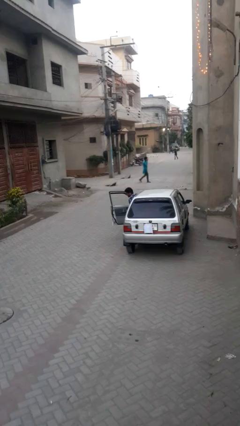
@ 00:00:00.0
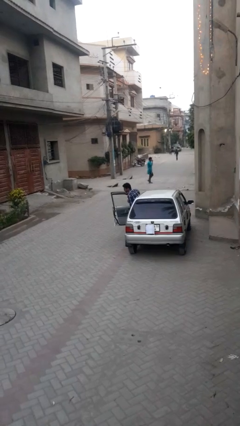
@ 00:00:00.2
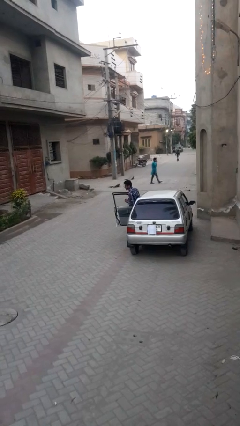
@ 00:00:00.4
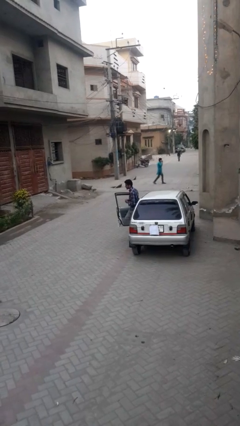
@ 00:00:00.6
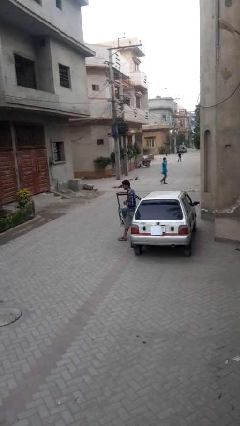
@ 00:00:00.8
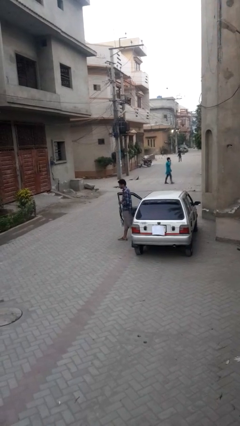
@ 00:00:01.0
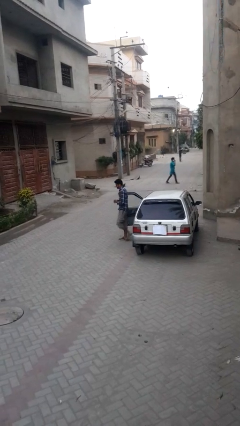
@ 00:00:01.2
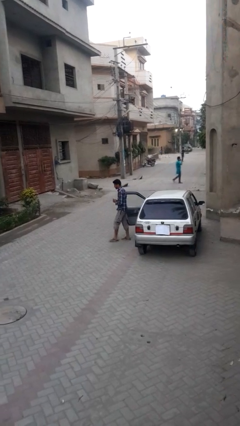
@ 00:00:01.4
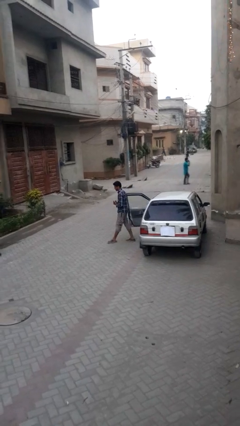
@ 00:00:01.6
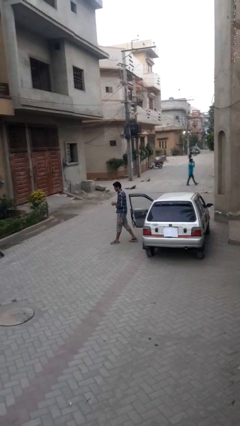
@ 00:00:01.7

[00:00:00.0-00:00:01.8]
person exits car

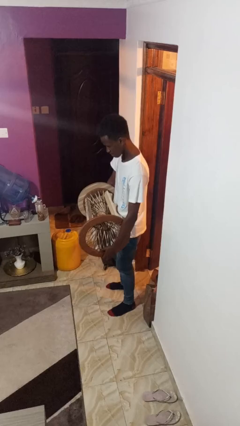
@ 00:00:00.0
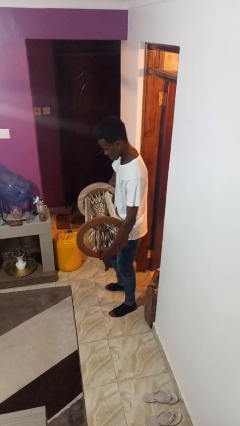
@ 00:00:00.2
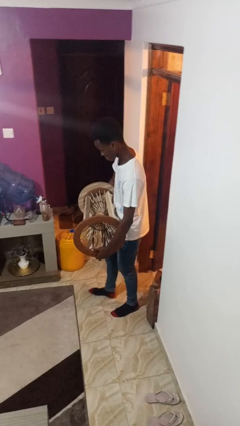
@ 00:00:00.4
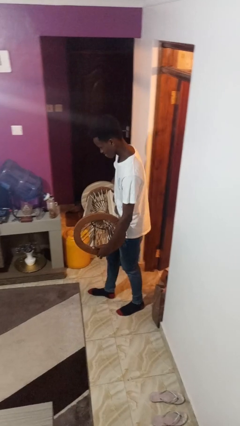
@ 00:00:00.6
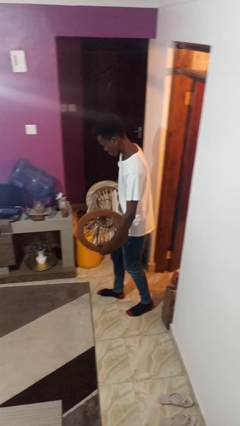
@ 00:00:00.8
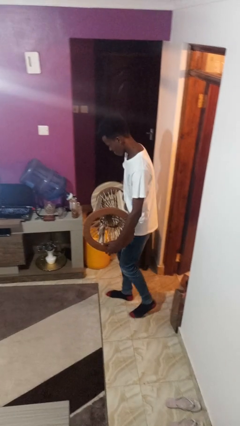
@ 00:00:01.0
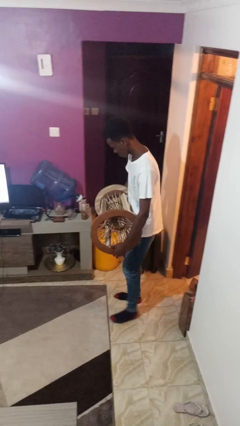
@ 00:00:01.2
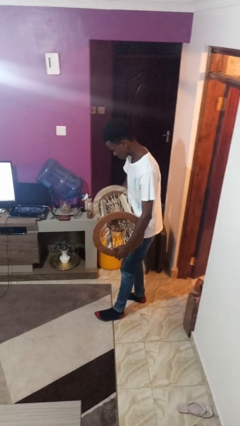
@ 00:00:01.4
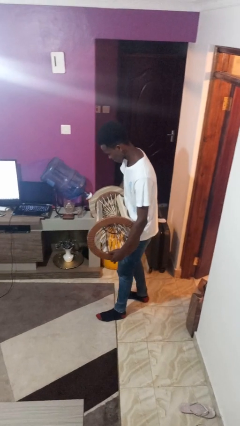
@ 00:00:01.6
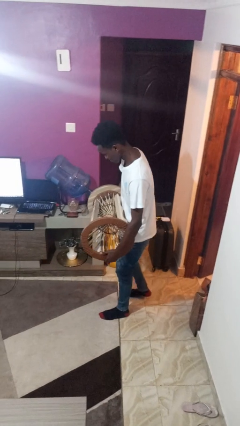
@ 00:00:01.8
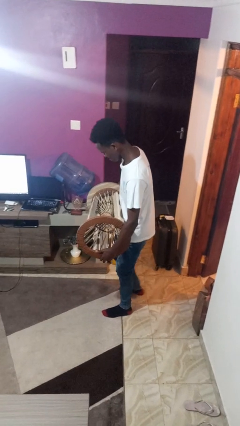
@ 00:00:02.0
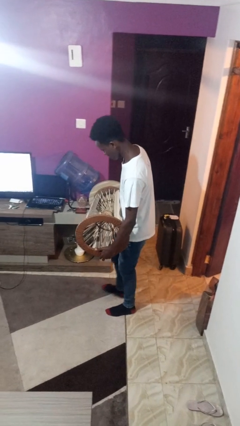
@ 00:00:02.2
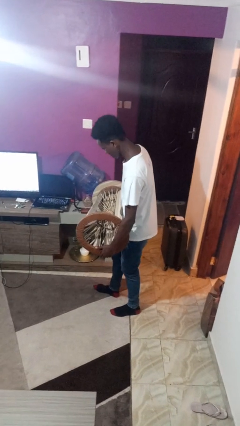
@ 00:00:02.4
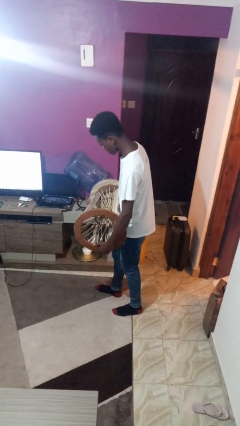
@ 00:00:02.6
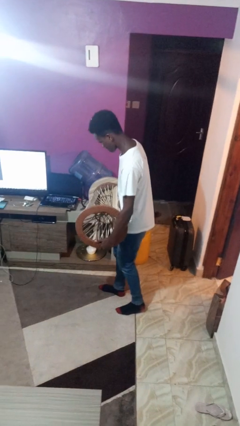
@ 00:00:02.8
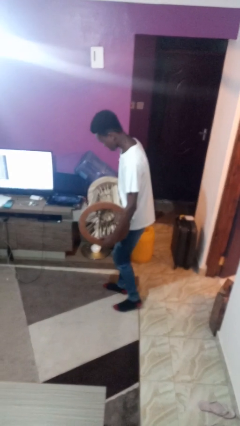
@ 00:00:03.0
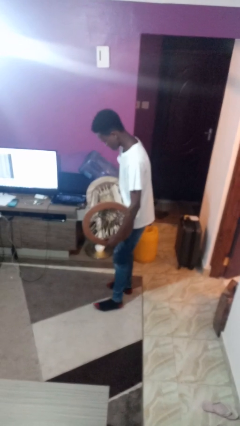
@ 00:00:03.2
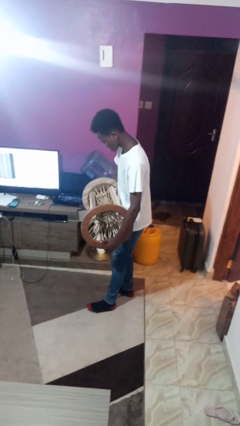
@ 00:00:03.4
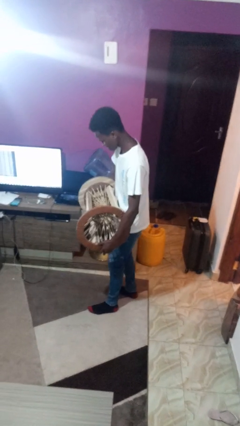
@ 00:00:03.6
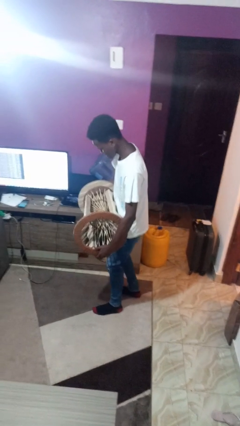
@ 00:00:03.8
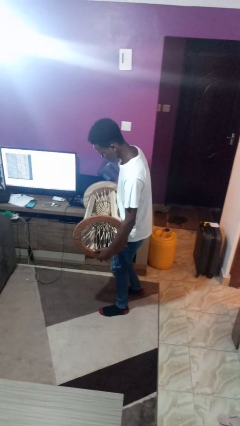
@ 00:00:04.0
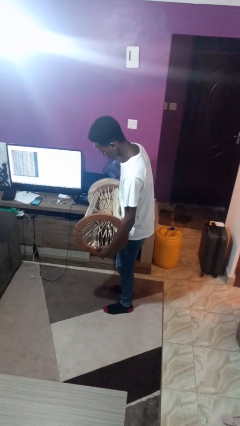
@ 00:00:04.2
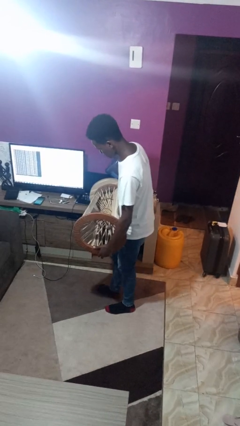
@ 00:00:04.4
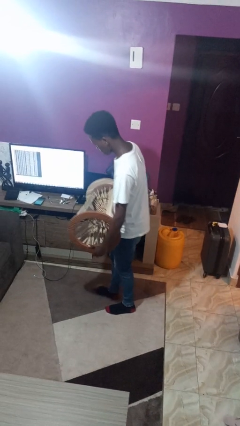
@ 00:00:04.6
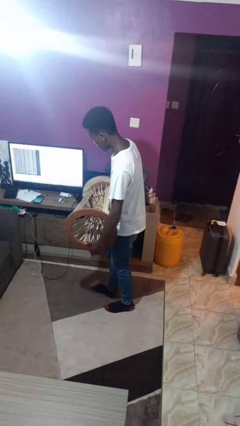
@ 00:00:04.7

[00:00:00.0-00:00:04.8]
person carries furniture

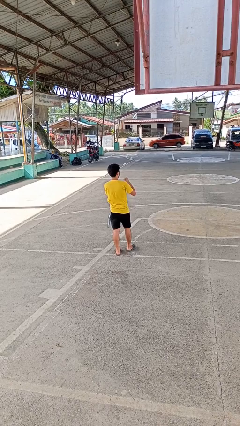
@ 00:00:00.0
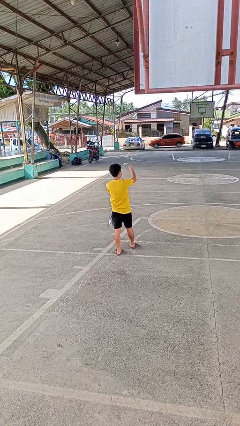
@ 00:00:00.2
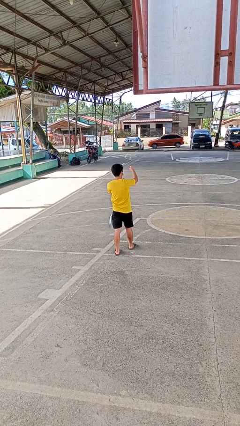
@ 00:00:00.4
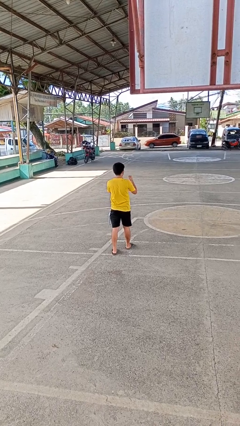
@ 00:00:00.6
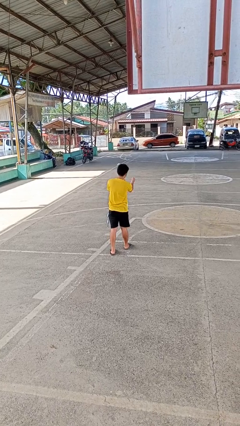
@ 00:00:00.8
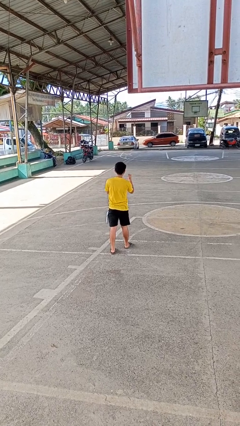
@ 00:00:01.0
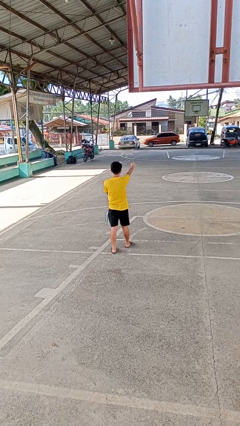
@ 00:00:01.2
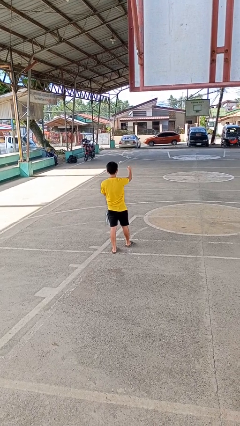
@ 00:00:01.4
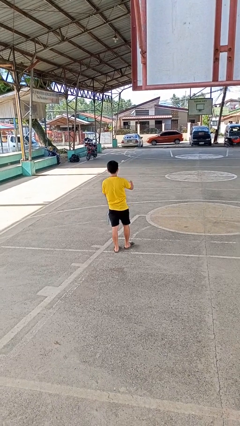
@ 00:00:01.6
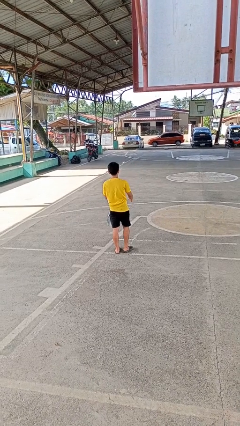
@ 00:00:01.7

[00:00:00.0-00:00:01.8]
person punches

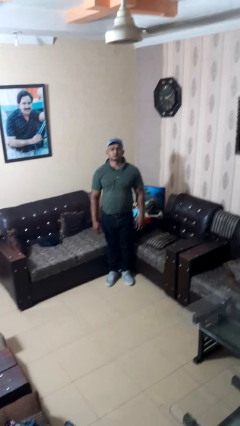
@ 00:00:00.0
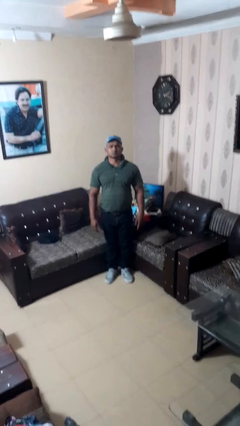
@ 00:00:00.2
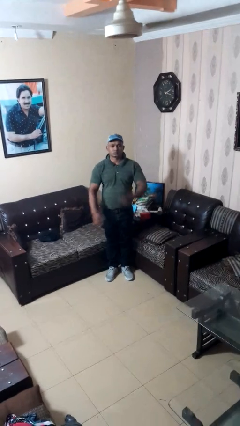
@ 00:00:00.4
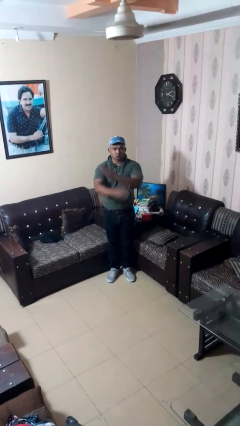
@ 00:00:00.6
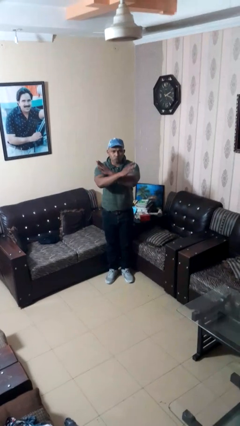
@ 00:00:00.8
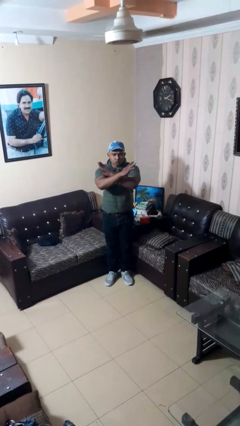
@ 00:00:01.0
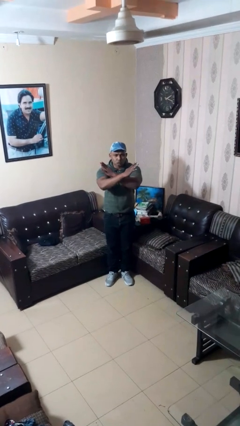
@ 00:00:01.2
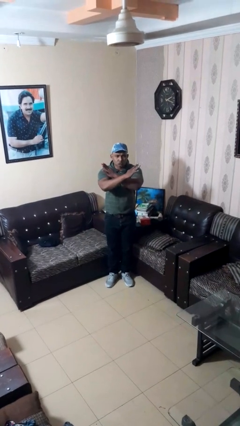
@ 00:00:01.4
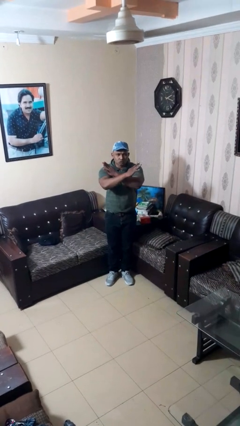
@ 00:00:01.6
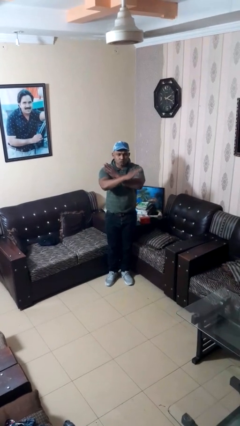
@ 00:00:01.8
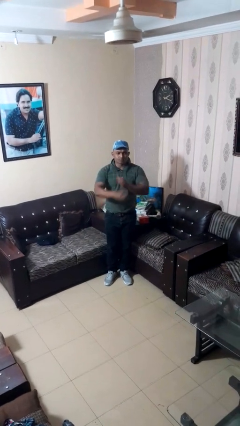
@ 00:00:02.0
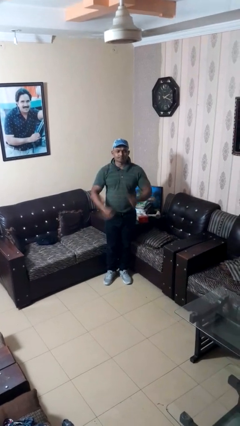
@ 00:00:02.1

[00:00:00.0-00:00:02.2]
person gestures arms x

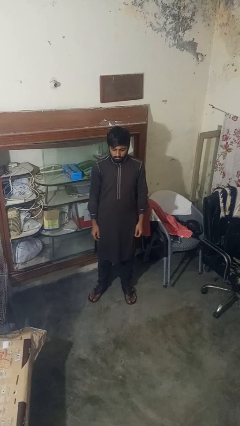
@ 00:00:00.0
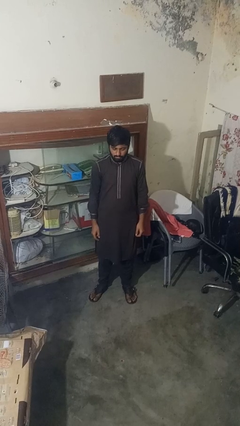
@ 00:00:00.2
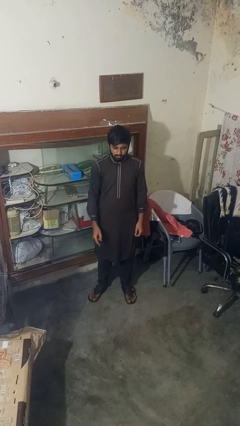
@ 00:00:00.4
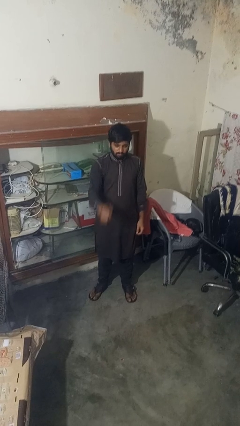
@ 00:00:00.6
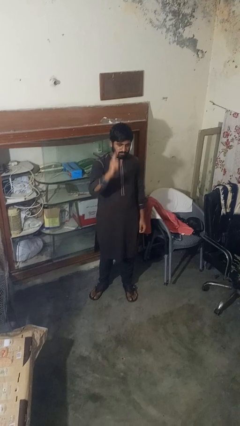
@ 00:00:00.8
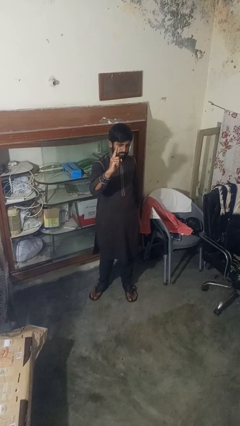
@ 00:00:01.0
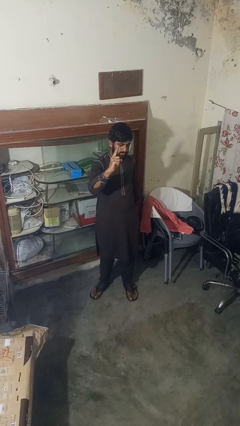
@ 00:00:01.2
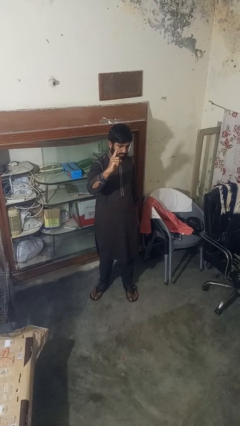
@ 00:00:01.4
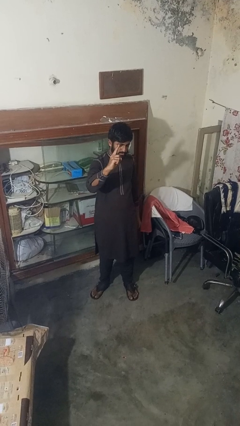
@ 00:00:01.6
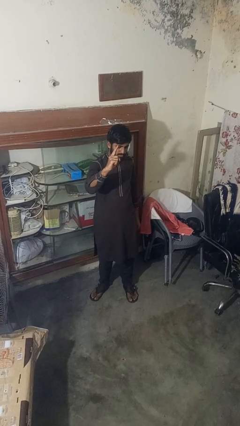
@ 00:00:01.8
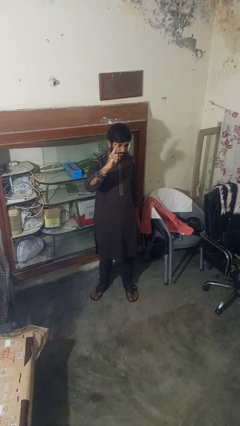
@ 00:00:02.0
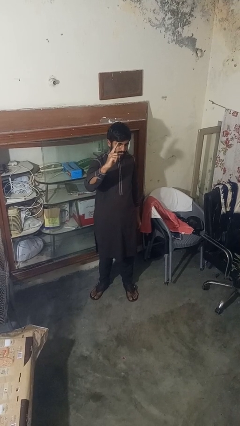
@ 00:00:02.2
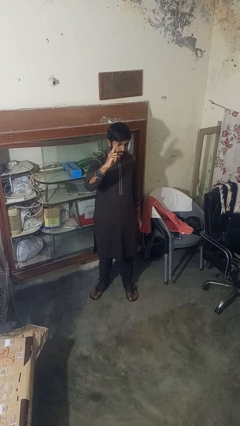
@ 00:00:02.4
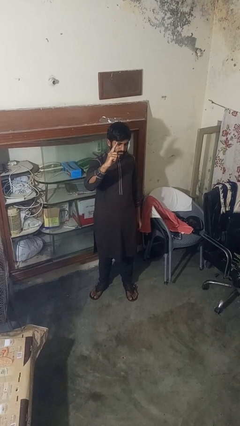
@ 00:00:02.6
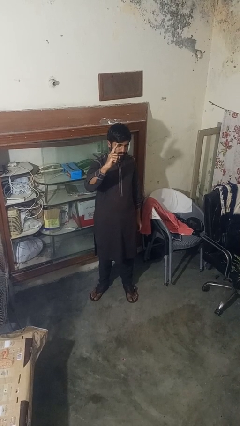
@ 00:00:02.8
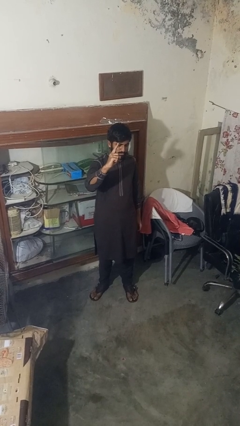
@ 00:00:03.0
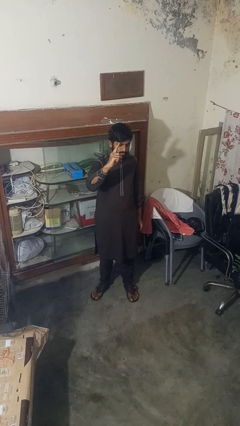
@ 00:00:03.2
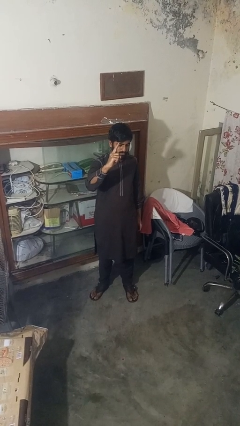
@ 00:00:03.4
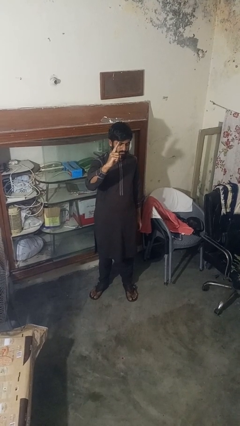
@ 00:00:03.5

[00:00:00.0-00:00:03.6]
person gestures number one

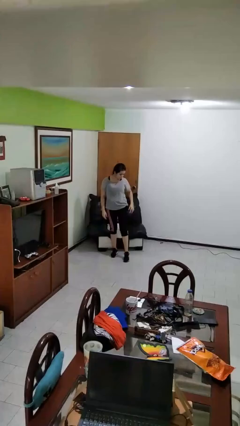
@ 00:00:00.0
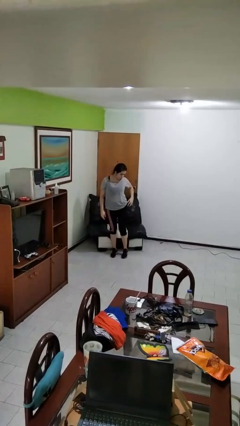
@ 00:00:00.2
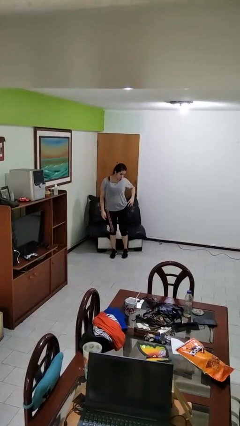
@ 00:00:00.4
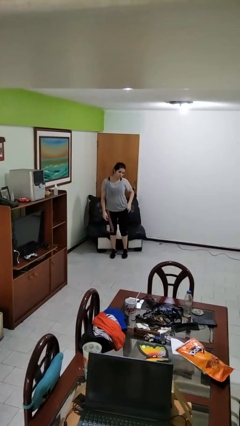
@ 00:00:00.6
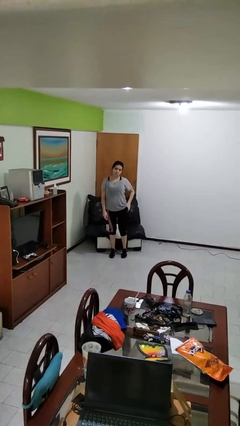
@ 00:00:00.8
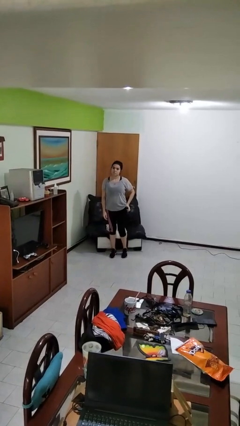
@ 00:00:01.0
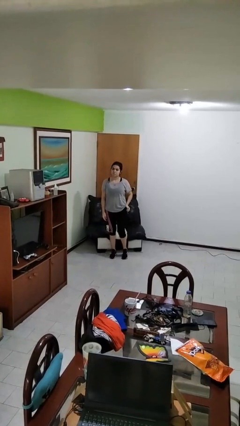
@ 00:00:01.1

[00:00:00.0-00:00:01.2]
person puts phone into pocket

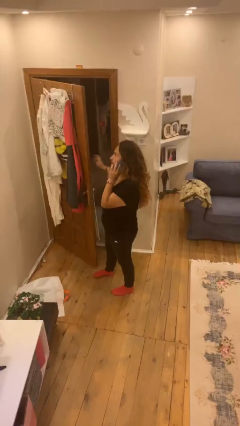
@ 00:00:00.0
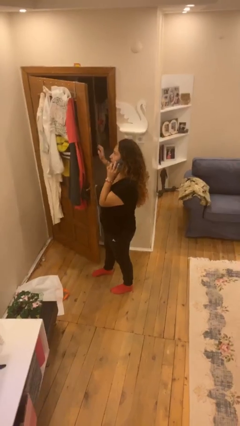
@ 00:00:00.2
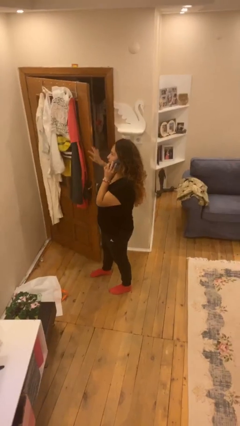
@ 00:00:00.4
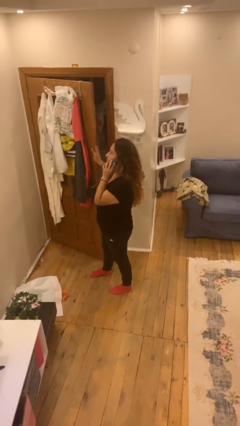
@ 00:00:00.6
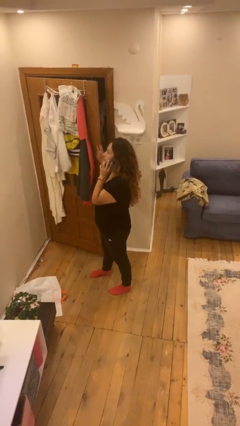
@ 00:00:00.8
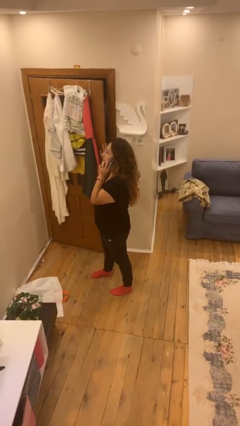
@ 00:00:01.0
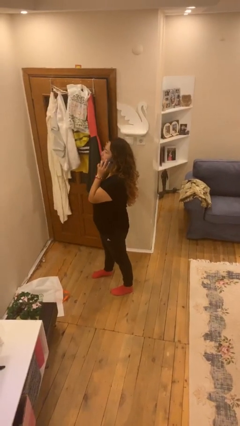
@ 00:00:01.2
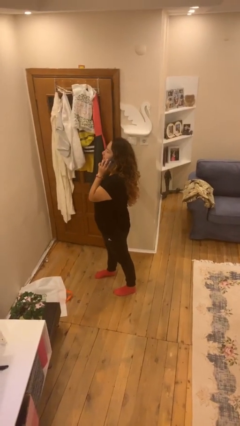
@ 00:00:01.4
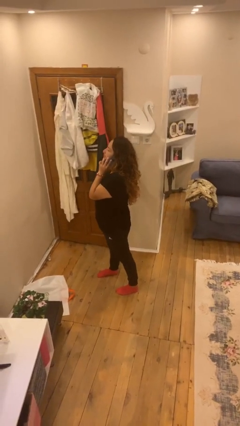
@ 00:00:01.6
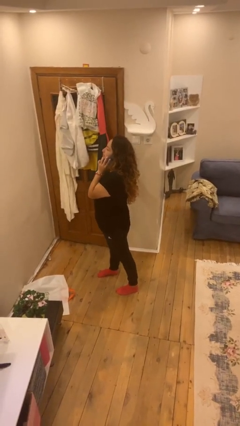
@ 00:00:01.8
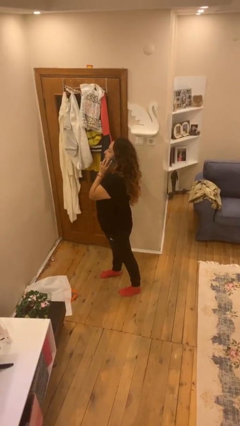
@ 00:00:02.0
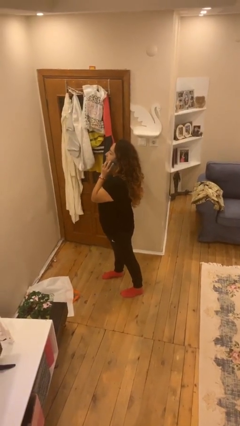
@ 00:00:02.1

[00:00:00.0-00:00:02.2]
person closes facility door
